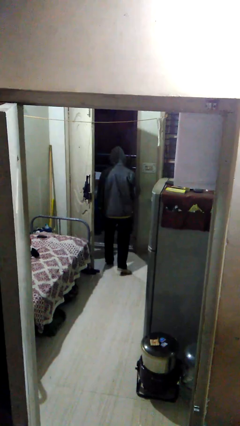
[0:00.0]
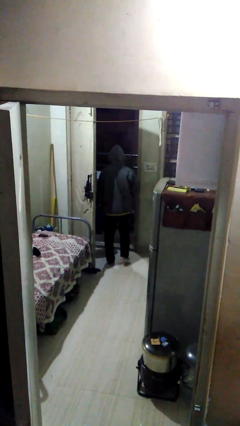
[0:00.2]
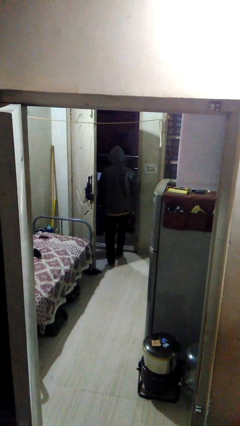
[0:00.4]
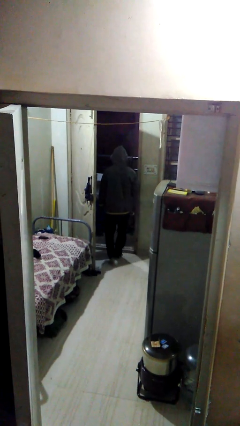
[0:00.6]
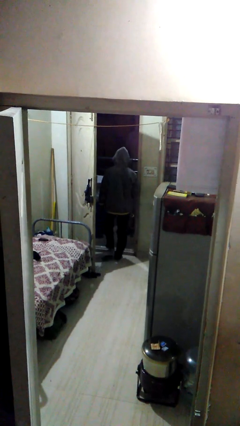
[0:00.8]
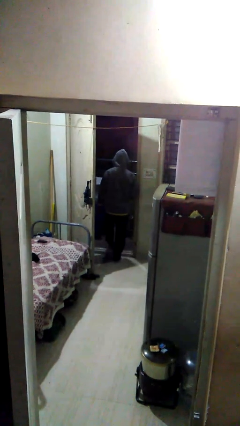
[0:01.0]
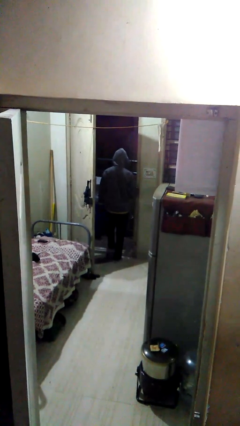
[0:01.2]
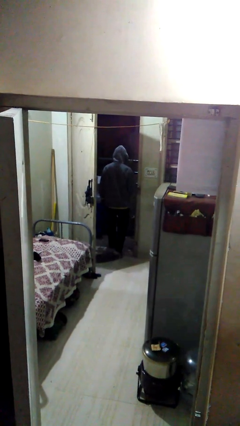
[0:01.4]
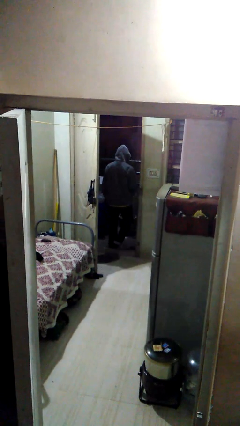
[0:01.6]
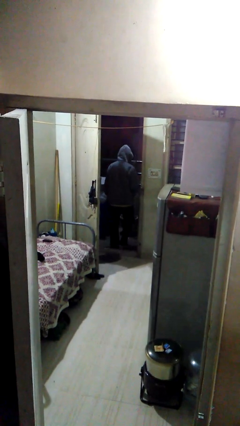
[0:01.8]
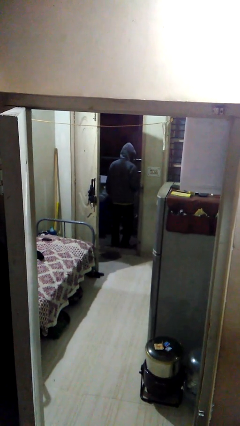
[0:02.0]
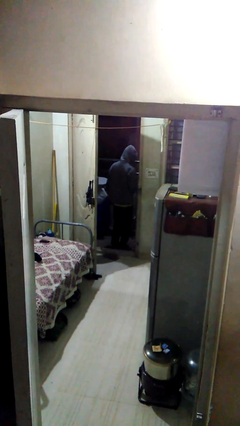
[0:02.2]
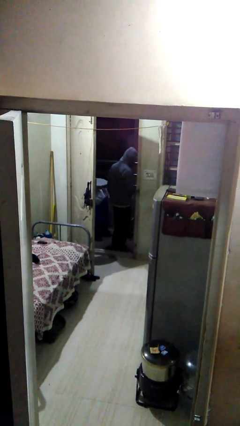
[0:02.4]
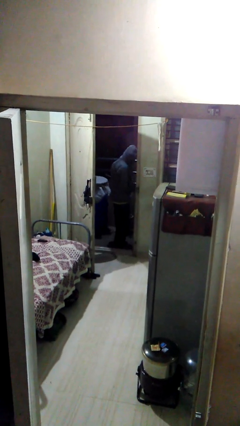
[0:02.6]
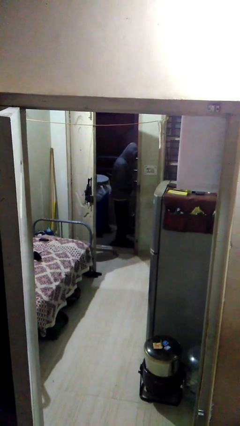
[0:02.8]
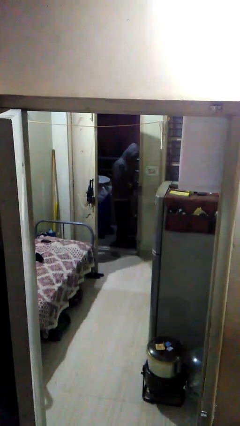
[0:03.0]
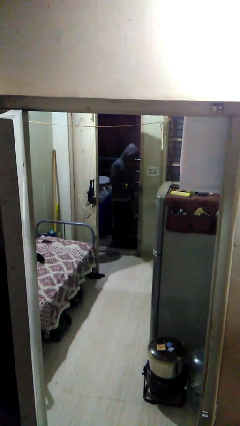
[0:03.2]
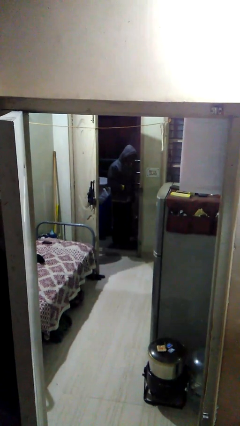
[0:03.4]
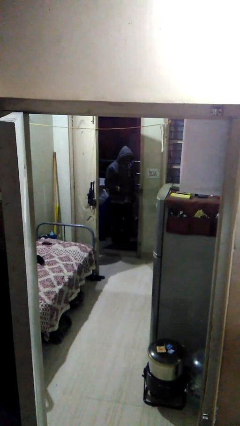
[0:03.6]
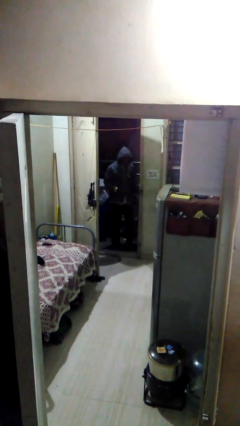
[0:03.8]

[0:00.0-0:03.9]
person exits scene through structure

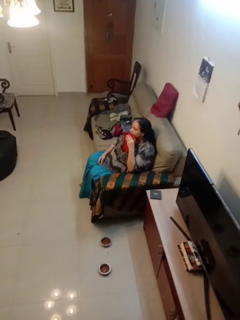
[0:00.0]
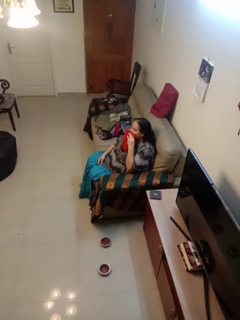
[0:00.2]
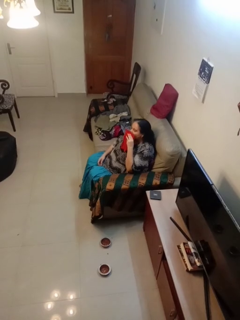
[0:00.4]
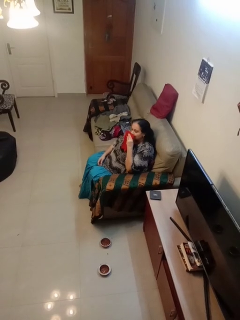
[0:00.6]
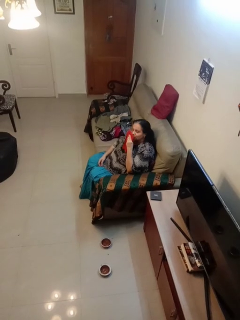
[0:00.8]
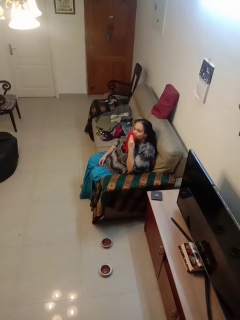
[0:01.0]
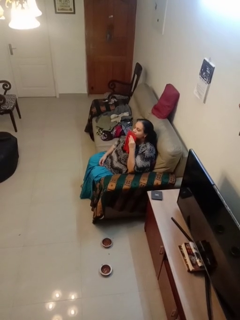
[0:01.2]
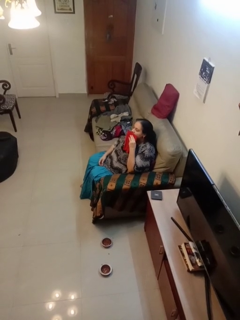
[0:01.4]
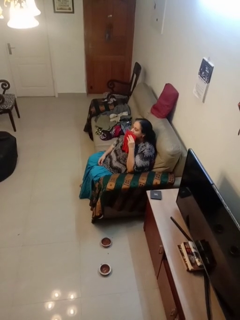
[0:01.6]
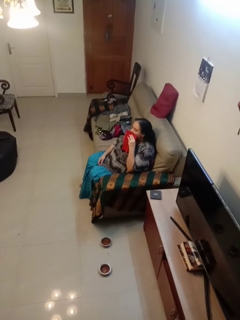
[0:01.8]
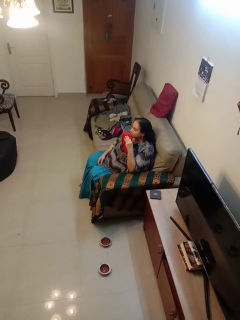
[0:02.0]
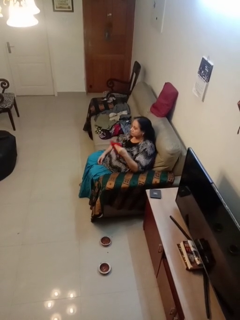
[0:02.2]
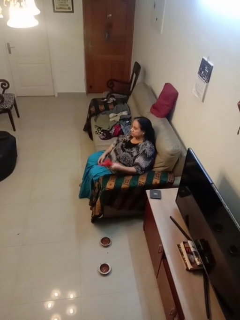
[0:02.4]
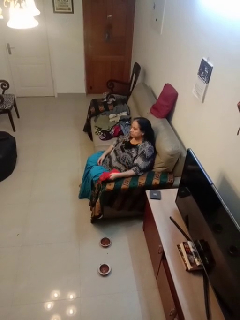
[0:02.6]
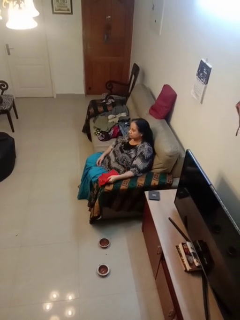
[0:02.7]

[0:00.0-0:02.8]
person wipes mouth with napkin

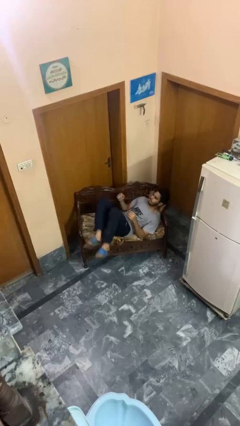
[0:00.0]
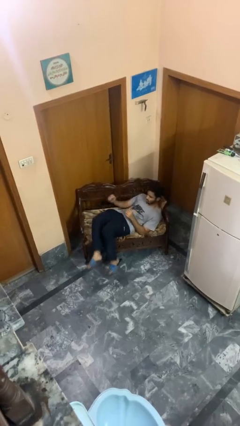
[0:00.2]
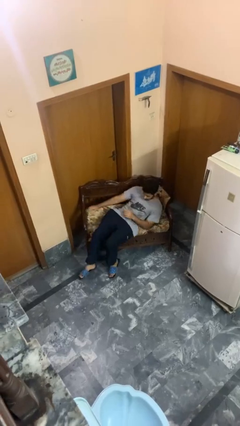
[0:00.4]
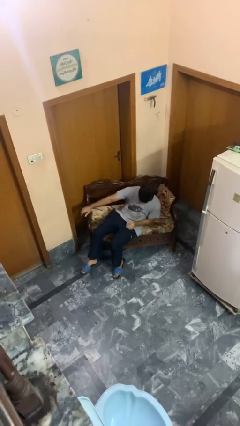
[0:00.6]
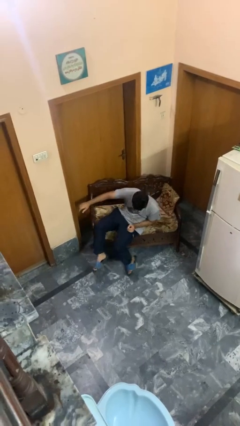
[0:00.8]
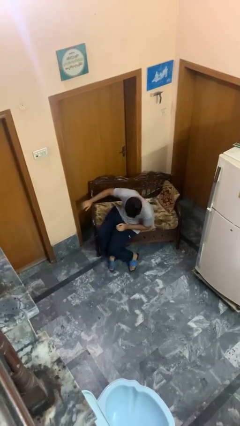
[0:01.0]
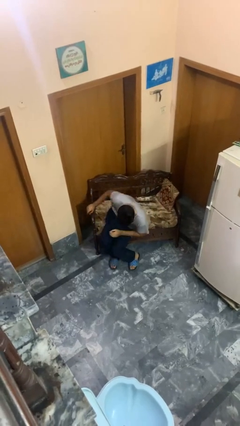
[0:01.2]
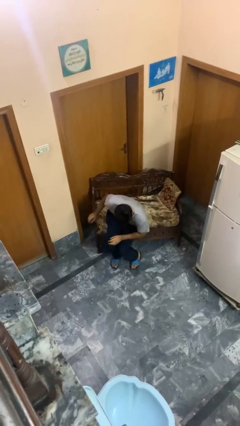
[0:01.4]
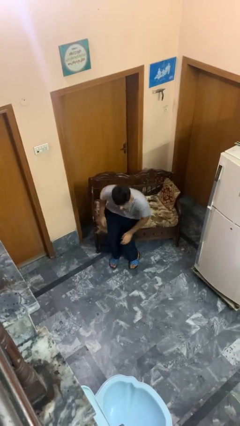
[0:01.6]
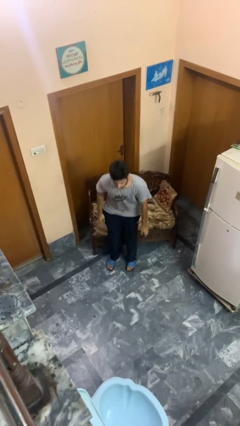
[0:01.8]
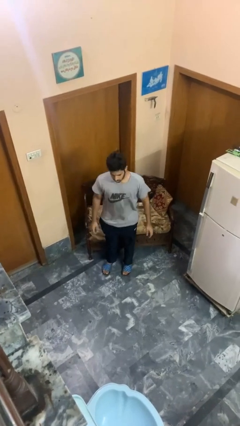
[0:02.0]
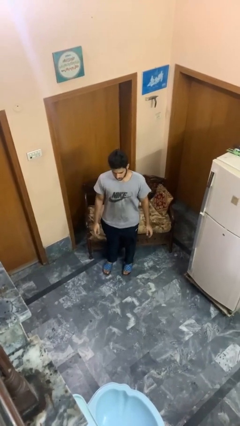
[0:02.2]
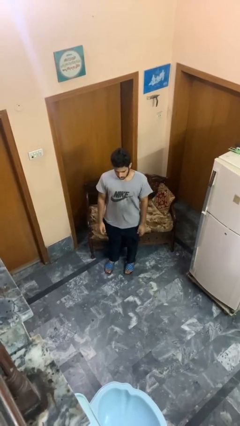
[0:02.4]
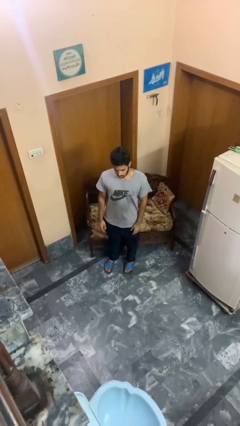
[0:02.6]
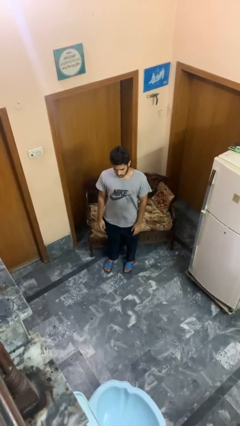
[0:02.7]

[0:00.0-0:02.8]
person stands up

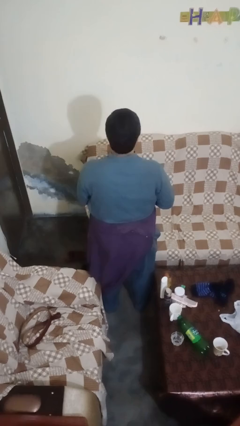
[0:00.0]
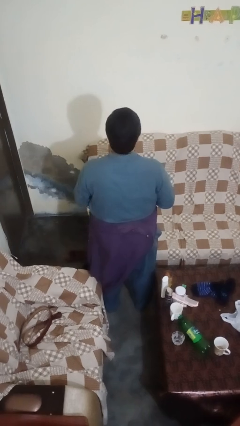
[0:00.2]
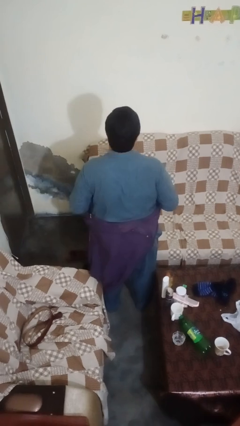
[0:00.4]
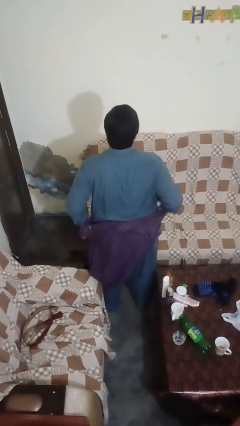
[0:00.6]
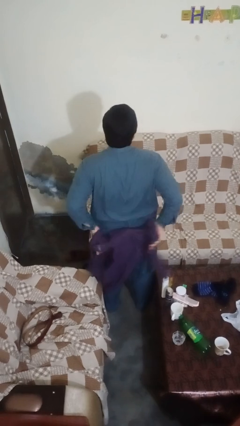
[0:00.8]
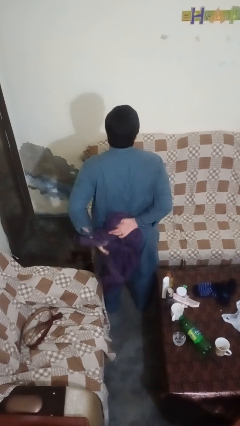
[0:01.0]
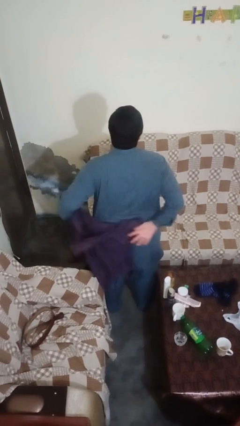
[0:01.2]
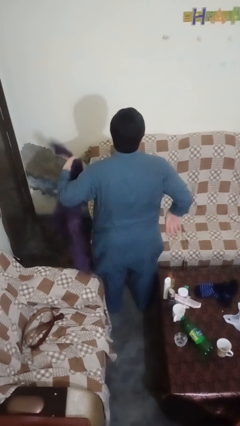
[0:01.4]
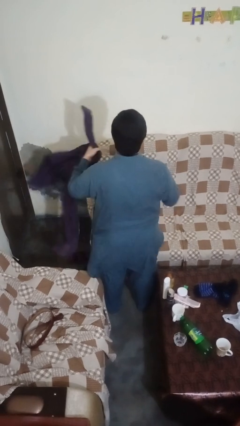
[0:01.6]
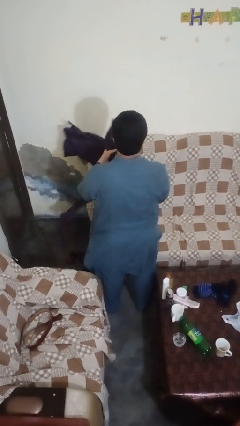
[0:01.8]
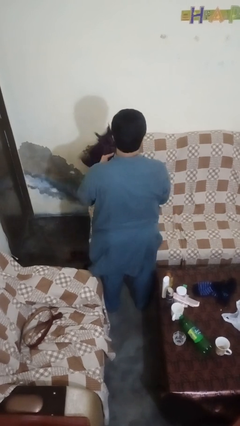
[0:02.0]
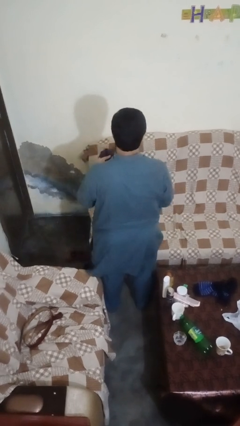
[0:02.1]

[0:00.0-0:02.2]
person unties jacket around waist

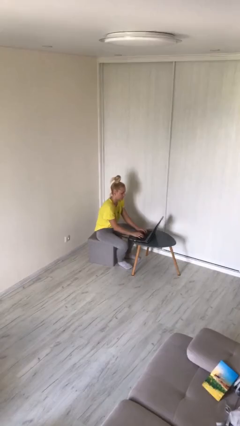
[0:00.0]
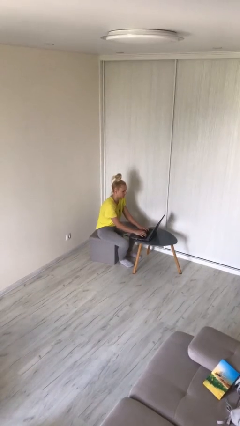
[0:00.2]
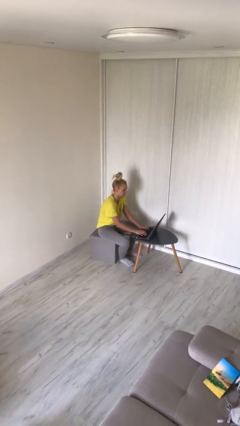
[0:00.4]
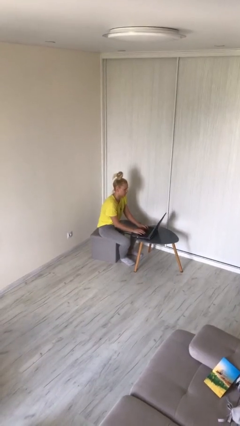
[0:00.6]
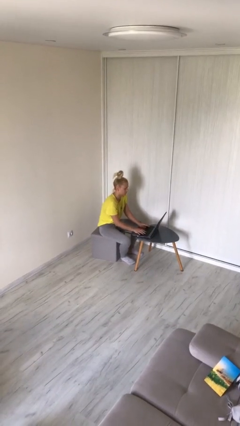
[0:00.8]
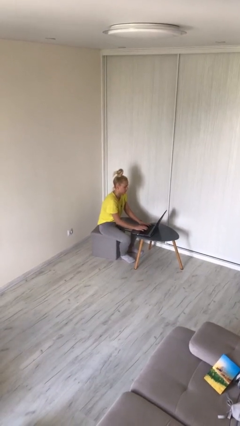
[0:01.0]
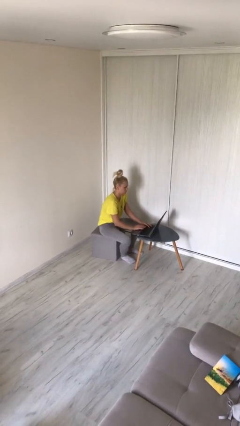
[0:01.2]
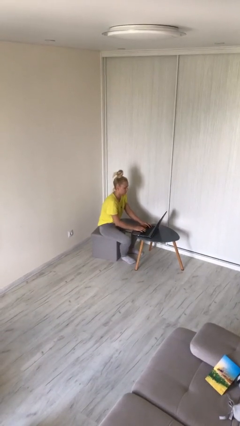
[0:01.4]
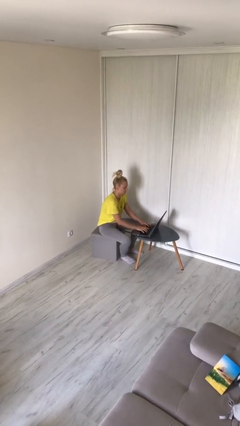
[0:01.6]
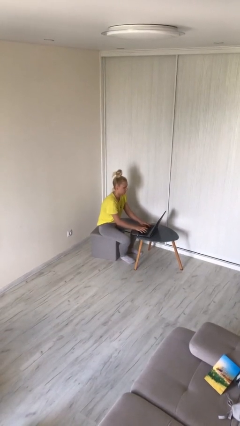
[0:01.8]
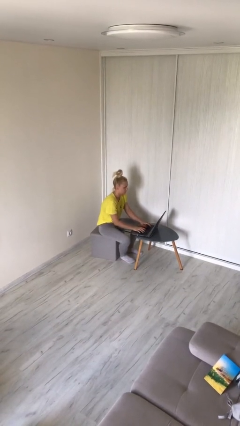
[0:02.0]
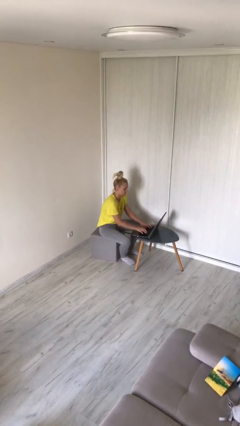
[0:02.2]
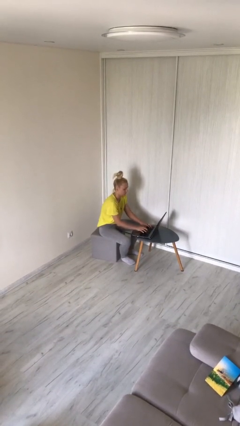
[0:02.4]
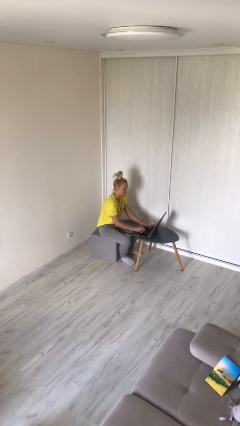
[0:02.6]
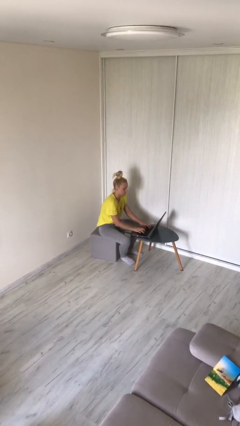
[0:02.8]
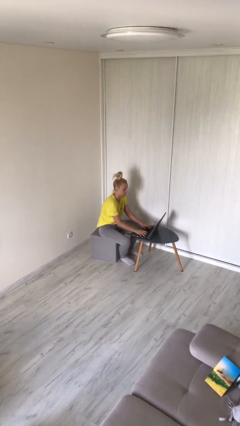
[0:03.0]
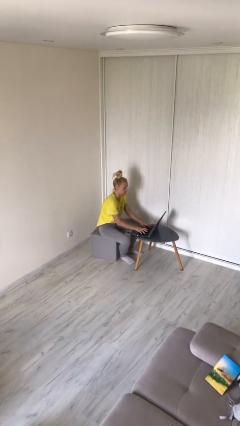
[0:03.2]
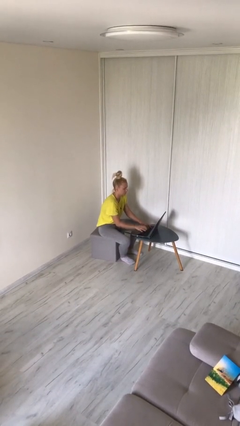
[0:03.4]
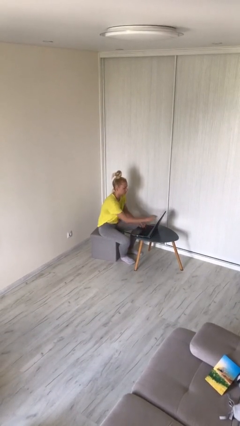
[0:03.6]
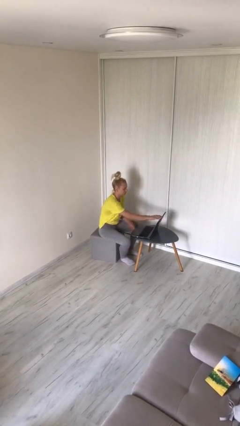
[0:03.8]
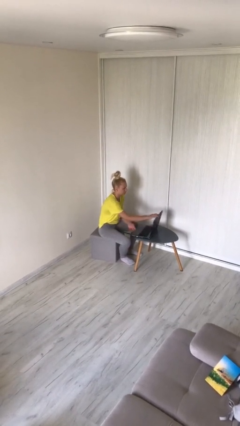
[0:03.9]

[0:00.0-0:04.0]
person interacts with laptop

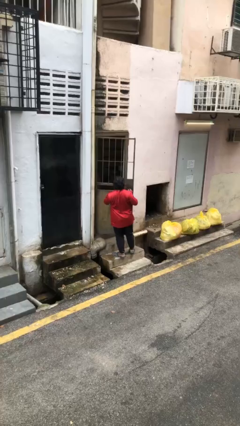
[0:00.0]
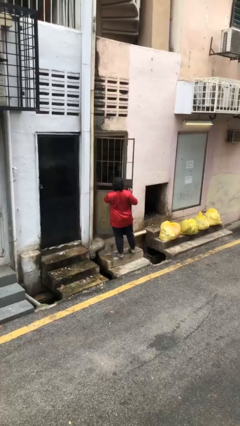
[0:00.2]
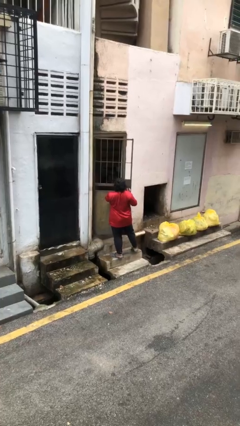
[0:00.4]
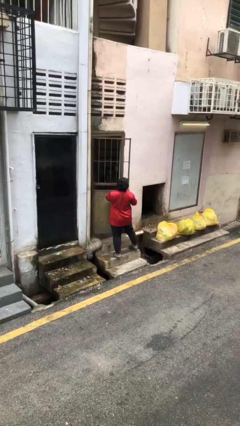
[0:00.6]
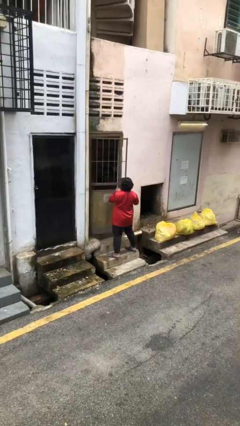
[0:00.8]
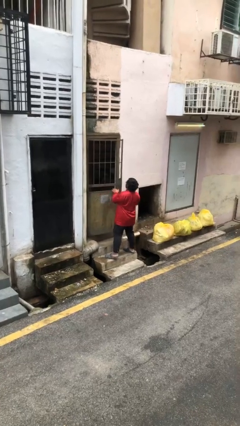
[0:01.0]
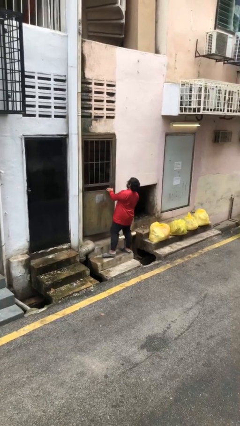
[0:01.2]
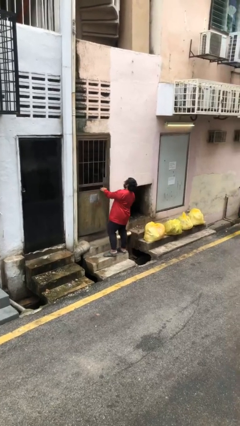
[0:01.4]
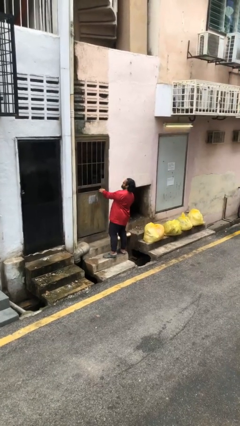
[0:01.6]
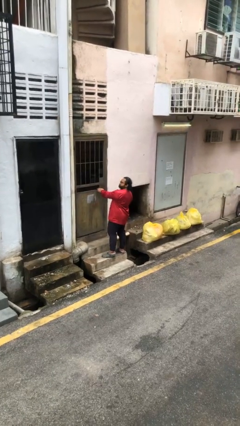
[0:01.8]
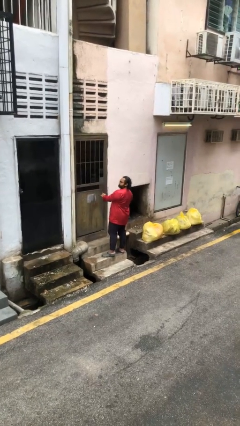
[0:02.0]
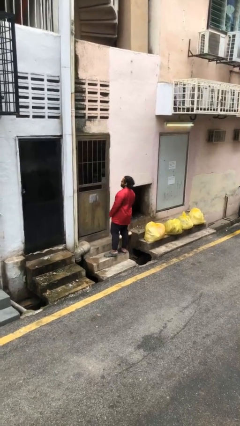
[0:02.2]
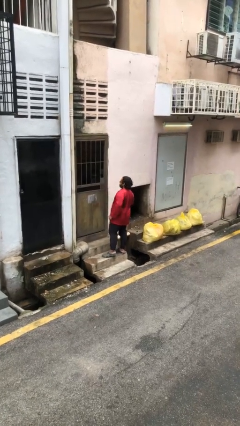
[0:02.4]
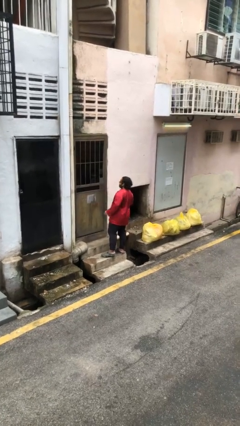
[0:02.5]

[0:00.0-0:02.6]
person closes facility door
